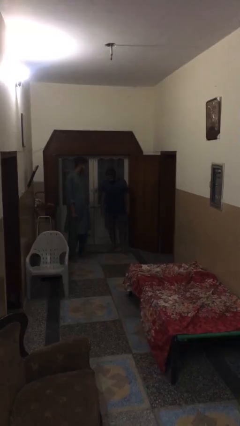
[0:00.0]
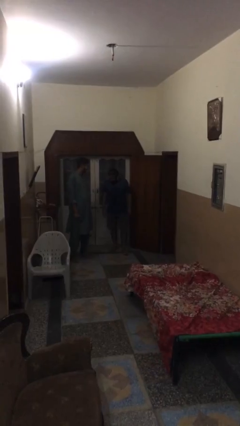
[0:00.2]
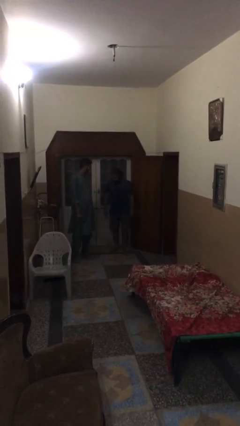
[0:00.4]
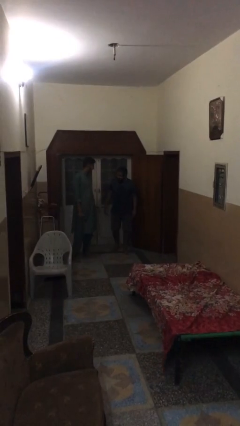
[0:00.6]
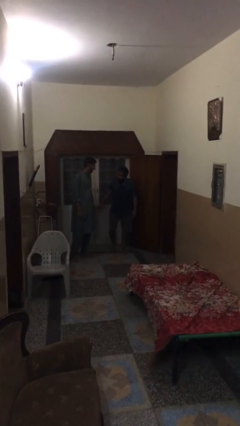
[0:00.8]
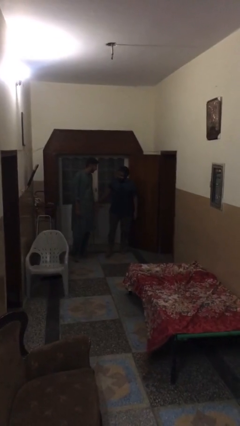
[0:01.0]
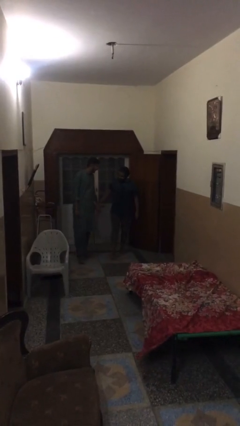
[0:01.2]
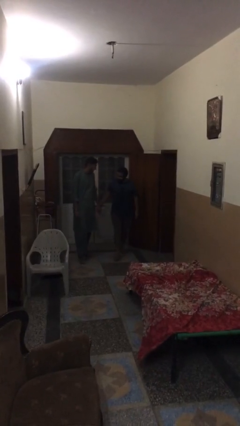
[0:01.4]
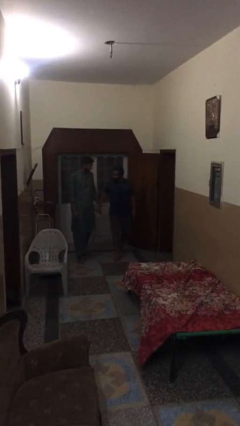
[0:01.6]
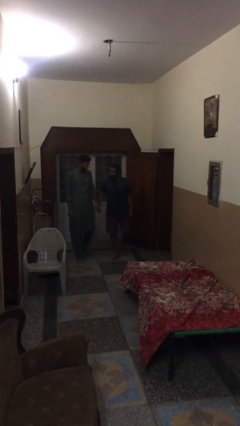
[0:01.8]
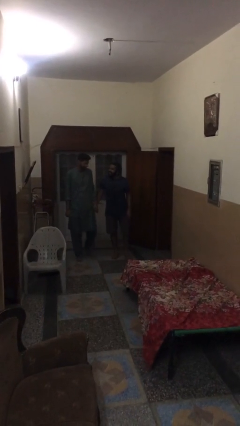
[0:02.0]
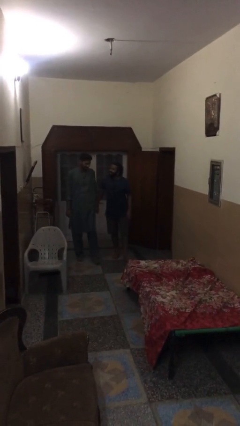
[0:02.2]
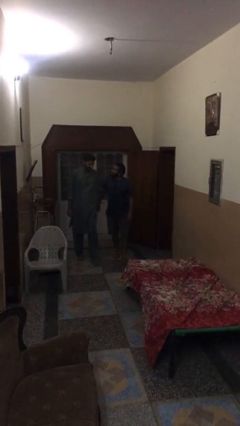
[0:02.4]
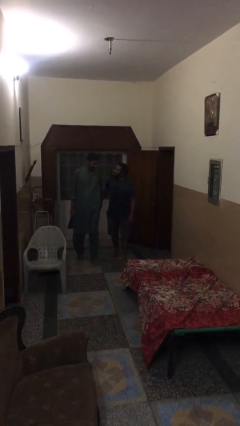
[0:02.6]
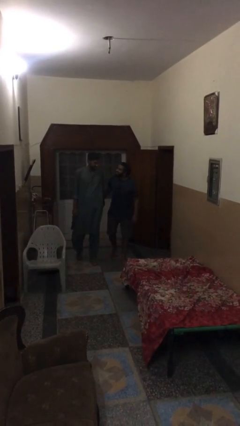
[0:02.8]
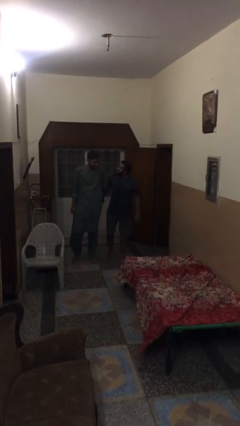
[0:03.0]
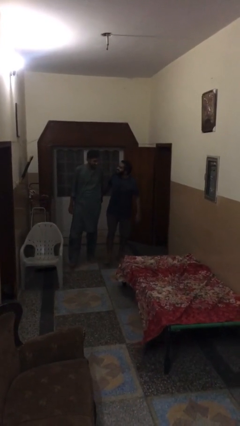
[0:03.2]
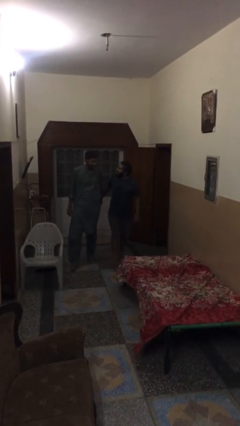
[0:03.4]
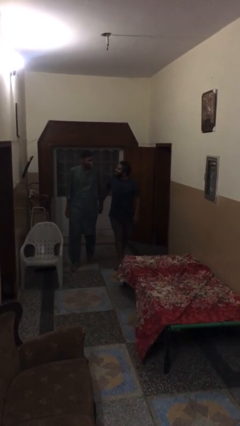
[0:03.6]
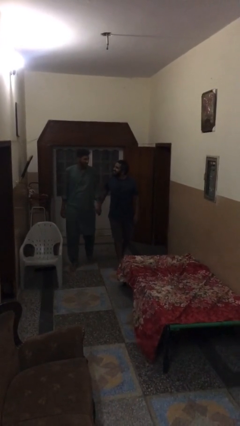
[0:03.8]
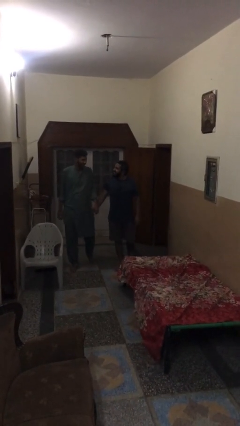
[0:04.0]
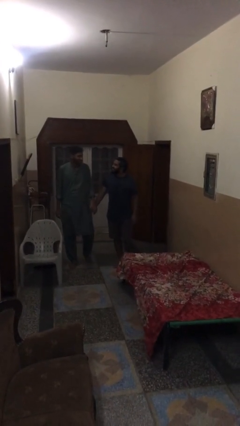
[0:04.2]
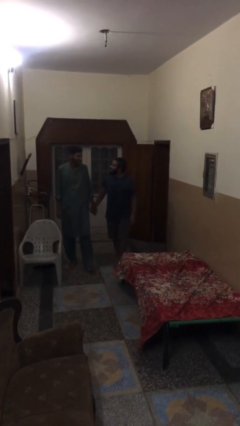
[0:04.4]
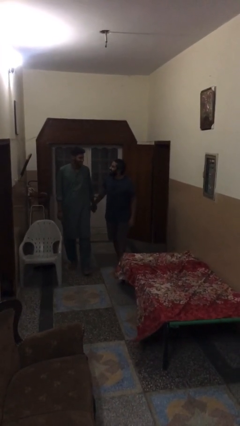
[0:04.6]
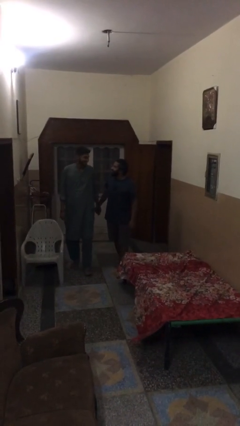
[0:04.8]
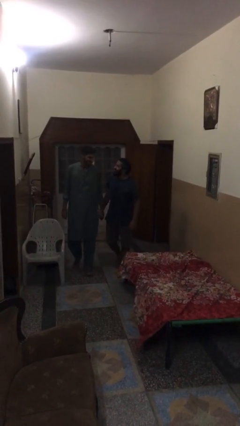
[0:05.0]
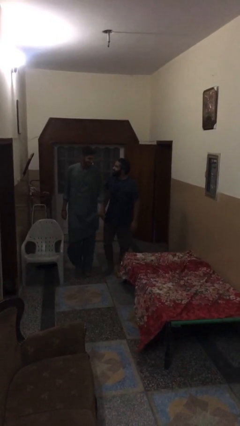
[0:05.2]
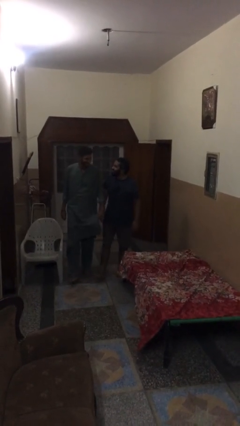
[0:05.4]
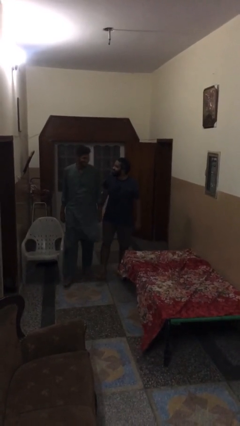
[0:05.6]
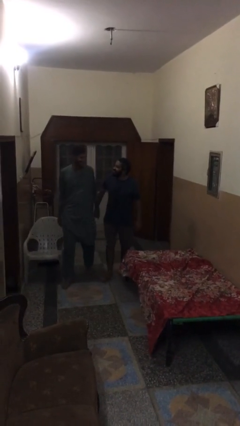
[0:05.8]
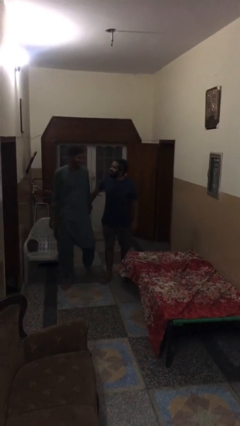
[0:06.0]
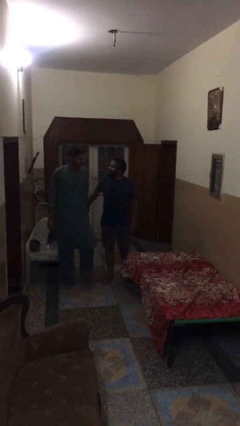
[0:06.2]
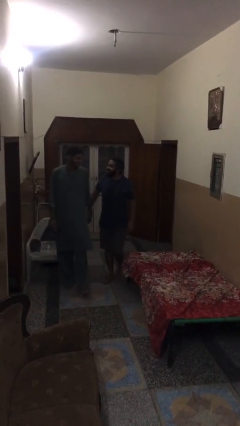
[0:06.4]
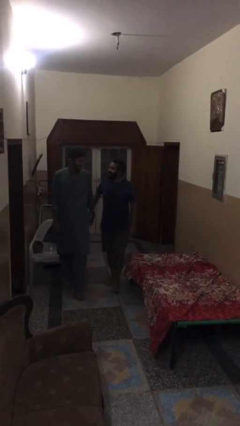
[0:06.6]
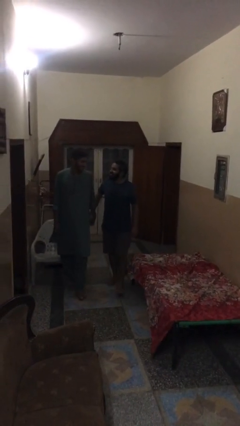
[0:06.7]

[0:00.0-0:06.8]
person holds hand

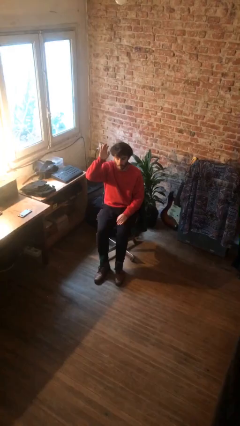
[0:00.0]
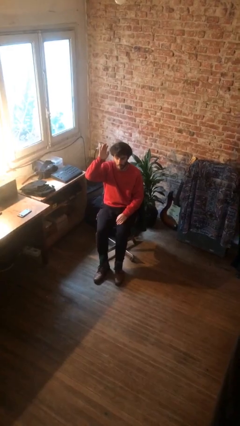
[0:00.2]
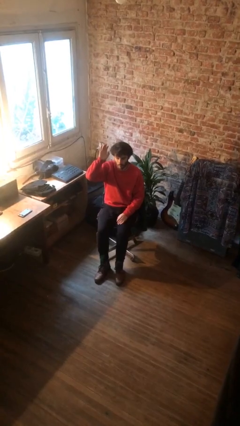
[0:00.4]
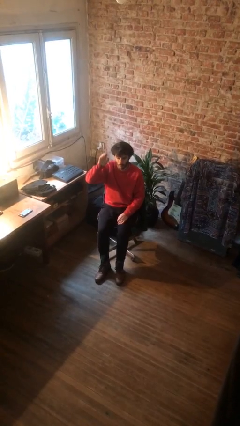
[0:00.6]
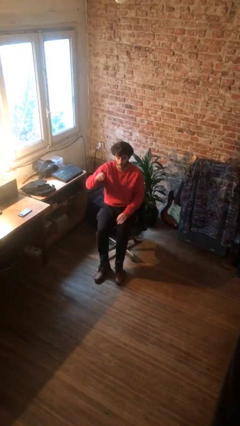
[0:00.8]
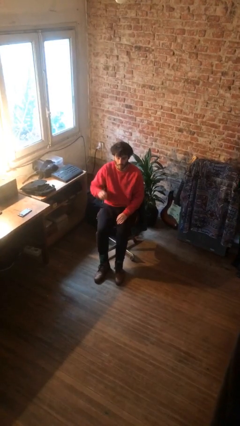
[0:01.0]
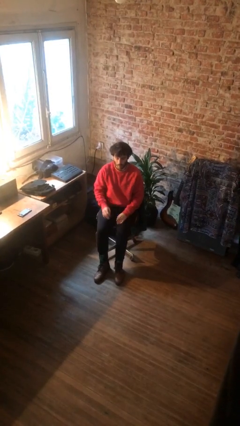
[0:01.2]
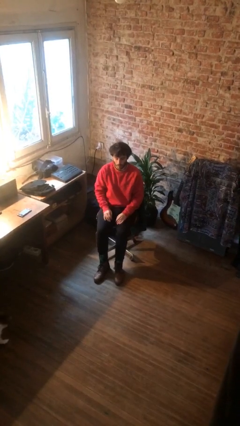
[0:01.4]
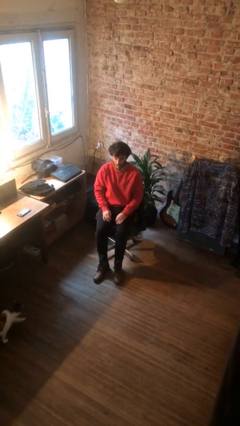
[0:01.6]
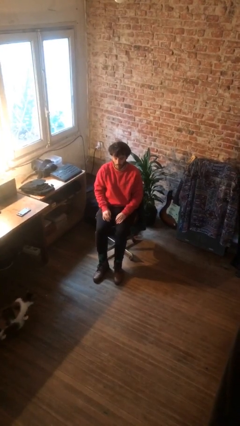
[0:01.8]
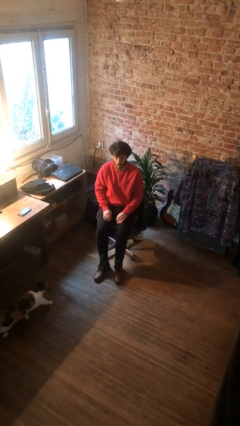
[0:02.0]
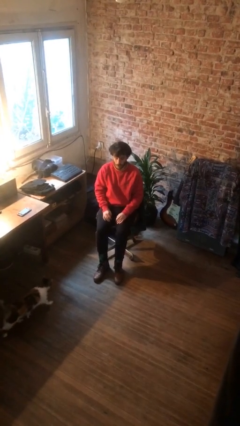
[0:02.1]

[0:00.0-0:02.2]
person gestures lower hand

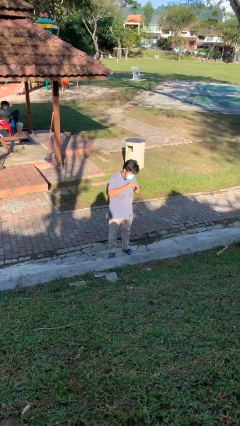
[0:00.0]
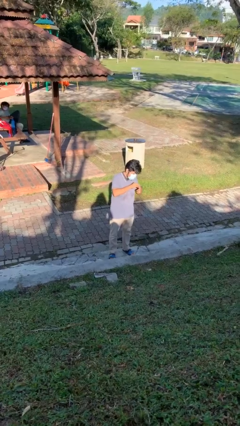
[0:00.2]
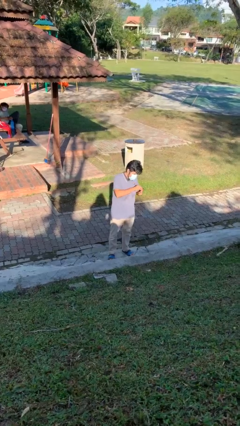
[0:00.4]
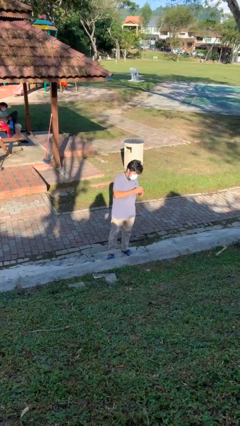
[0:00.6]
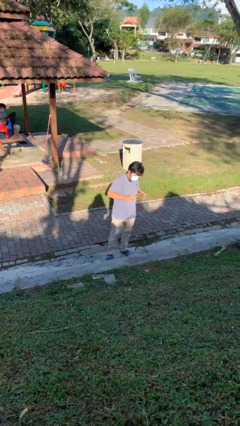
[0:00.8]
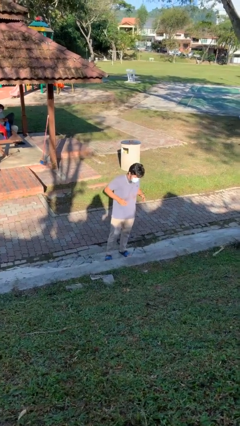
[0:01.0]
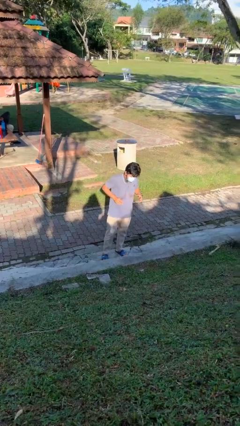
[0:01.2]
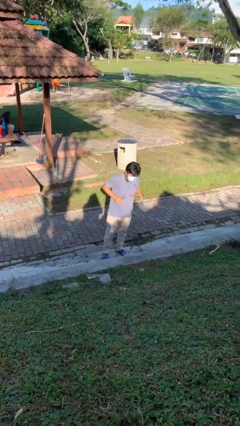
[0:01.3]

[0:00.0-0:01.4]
person puts on ring

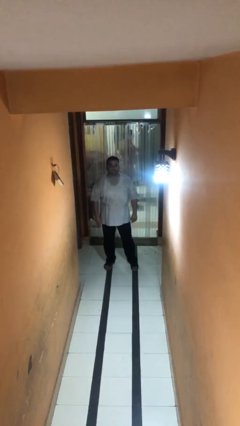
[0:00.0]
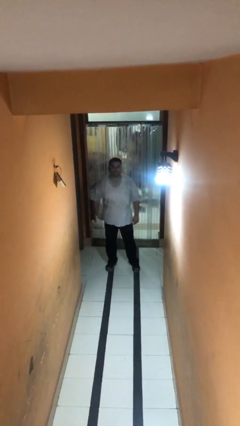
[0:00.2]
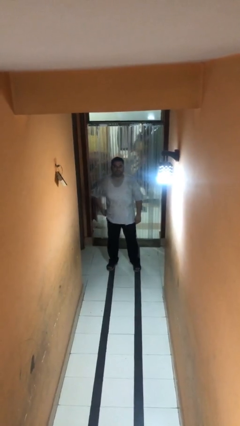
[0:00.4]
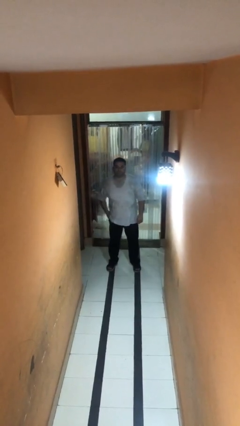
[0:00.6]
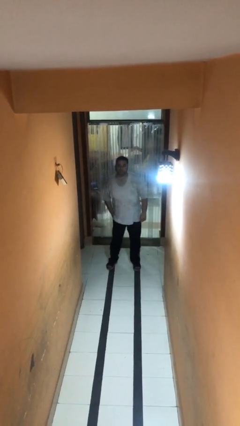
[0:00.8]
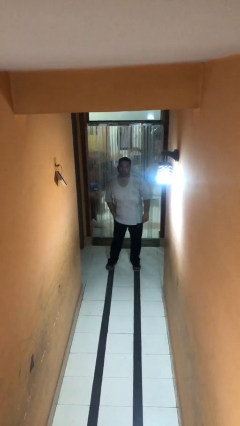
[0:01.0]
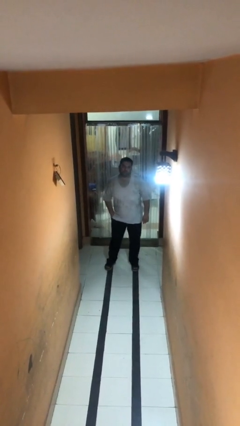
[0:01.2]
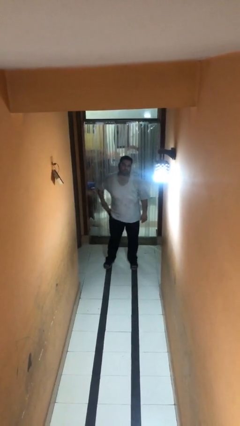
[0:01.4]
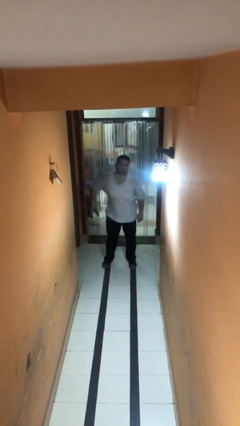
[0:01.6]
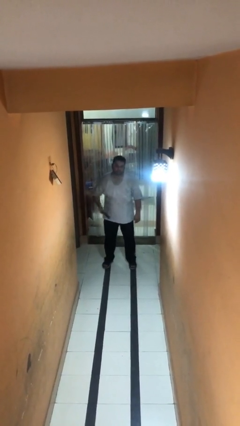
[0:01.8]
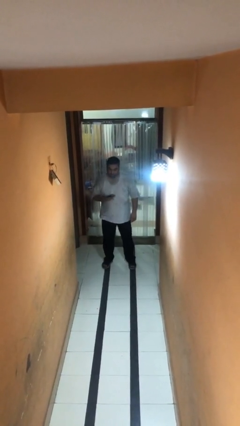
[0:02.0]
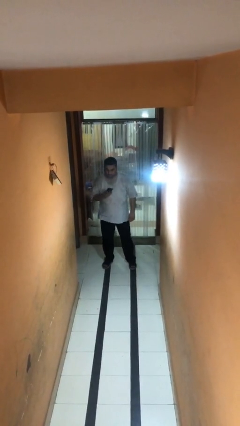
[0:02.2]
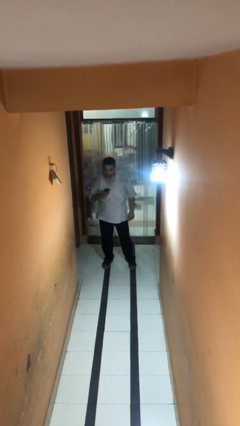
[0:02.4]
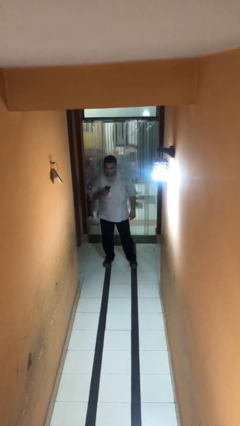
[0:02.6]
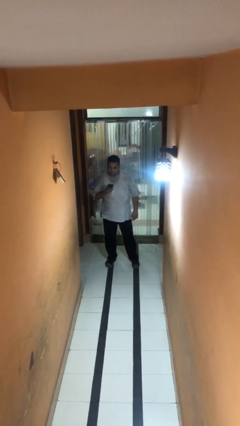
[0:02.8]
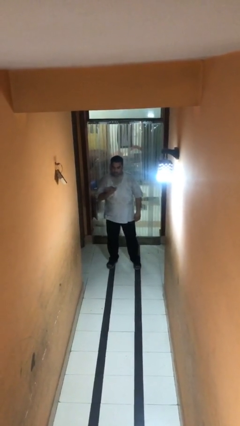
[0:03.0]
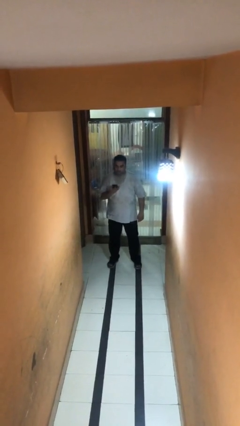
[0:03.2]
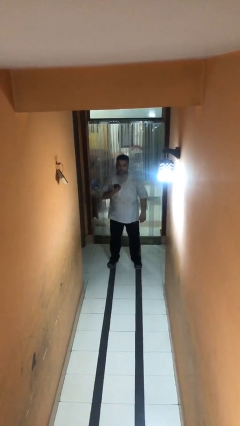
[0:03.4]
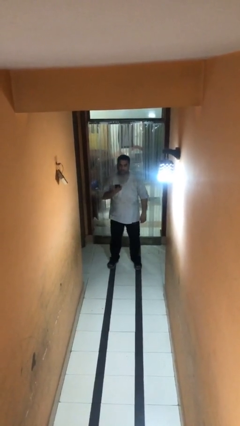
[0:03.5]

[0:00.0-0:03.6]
person takes phone from pocket

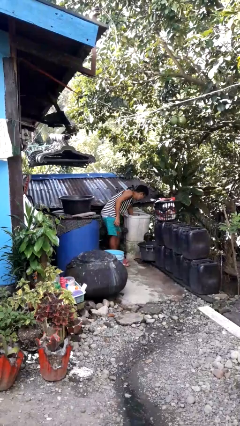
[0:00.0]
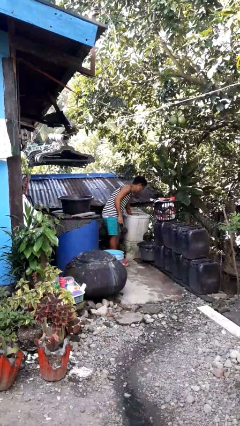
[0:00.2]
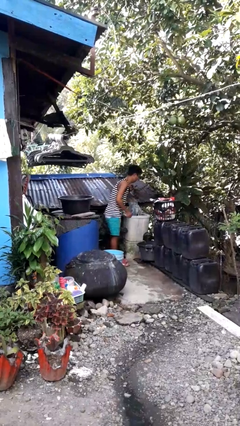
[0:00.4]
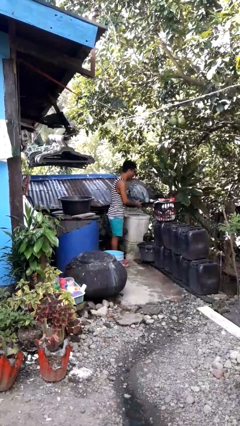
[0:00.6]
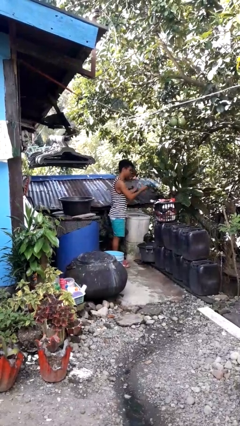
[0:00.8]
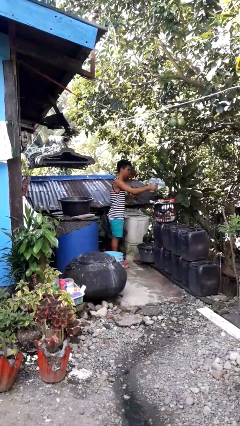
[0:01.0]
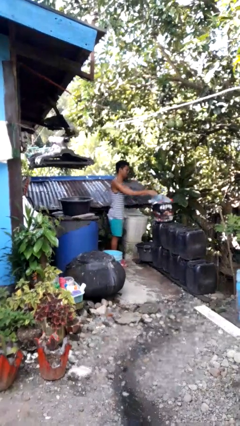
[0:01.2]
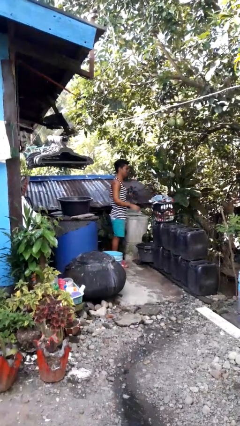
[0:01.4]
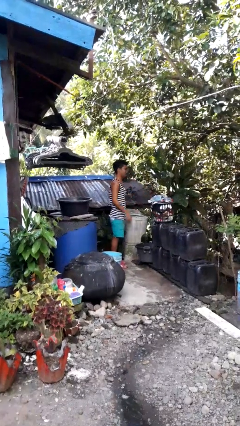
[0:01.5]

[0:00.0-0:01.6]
person unloads dryer

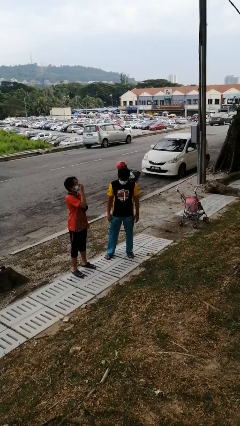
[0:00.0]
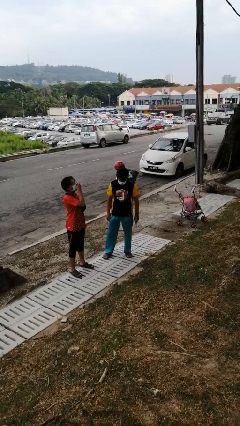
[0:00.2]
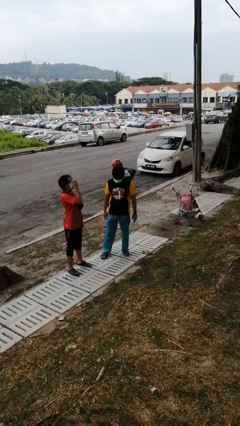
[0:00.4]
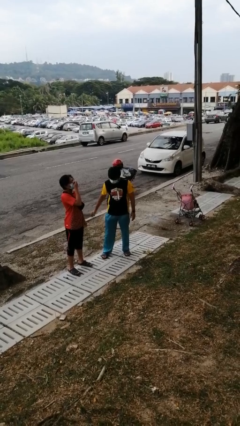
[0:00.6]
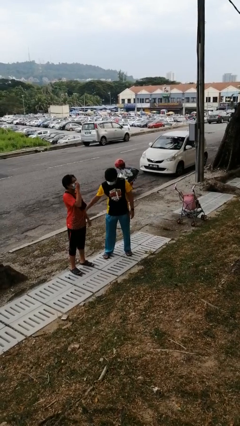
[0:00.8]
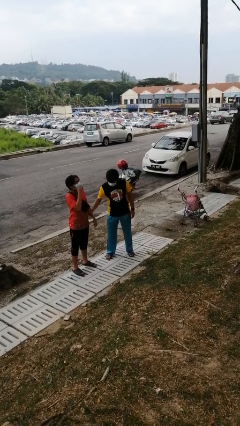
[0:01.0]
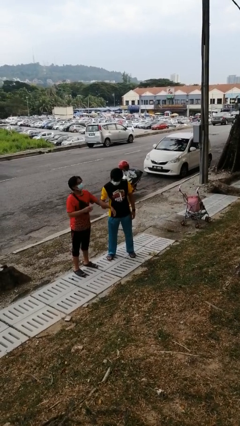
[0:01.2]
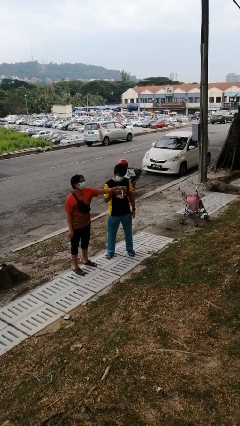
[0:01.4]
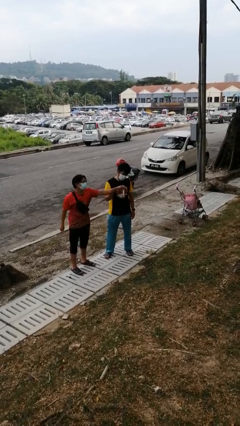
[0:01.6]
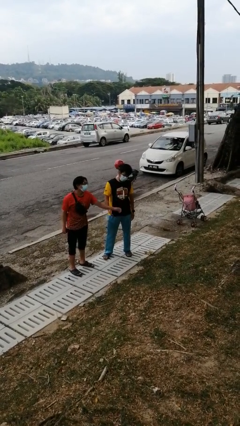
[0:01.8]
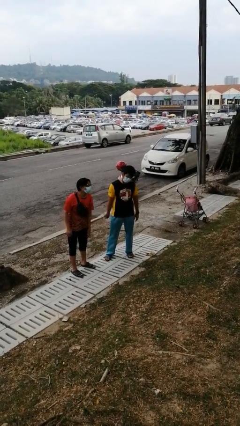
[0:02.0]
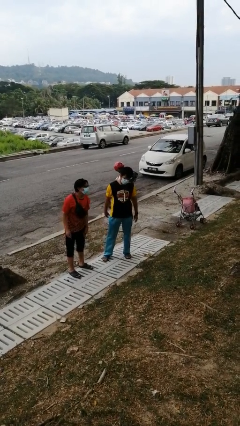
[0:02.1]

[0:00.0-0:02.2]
person grabs person by forearm
